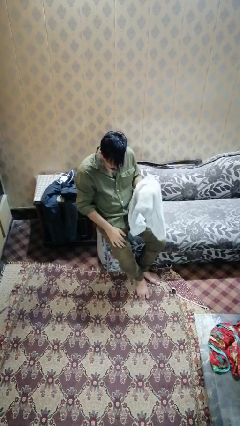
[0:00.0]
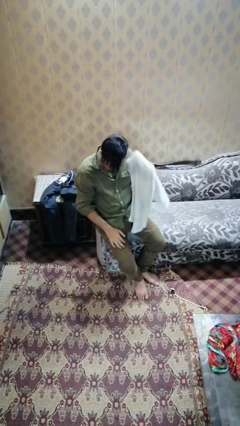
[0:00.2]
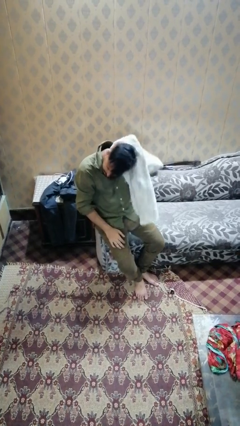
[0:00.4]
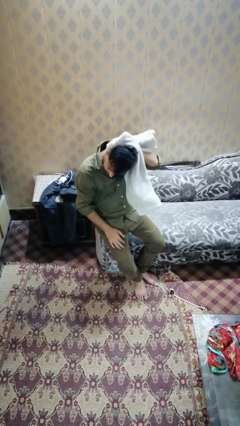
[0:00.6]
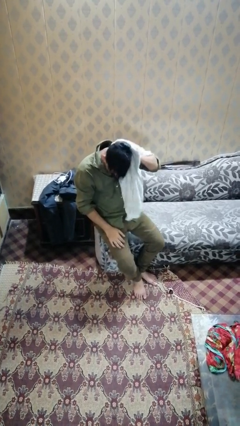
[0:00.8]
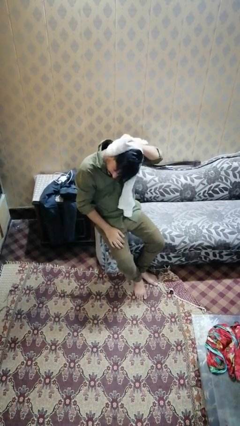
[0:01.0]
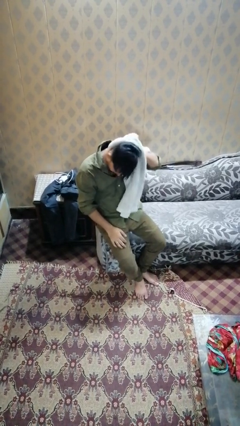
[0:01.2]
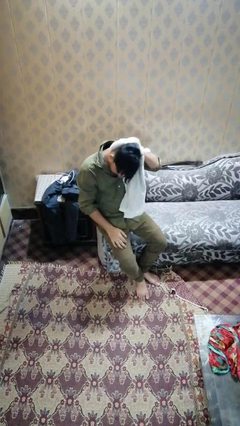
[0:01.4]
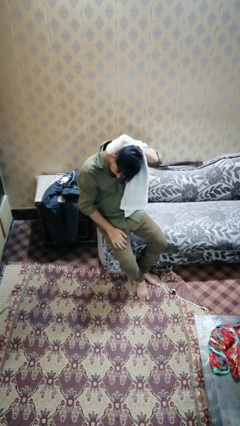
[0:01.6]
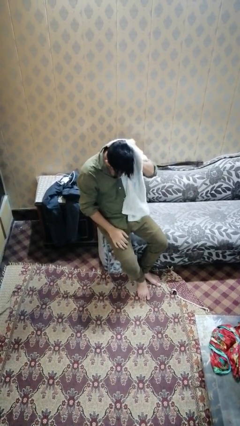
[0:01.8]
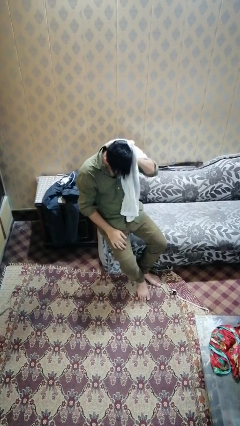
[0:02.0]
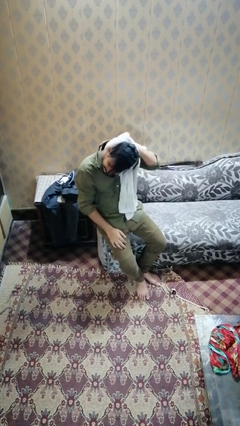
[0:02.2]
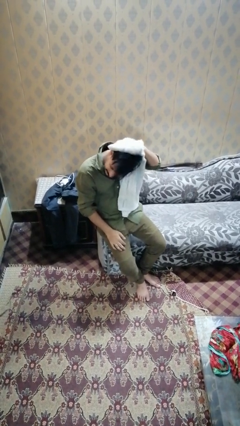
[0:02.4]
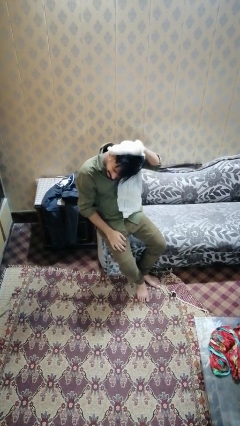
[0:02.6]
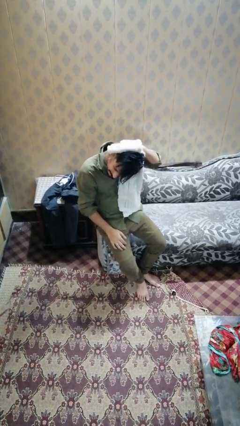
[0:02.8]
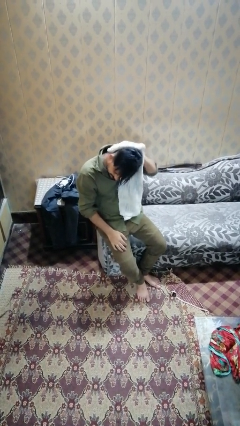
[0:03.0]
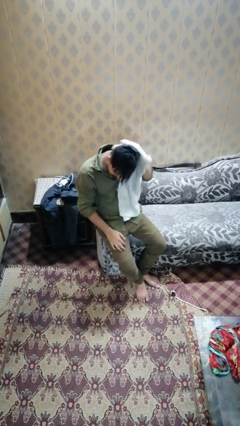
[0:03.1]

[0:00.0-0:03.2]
person dries hair with towel

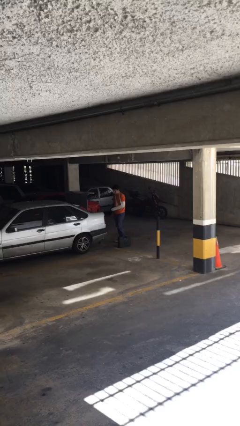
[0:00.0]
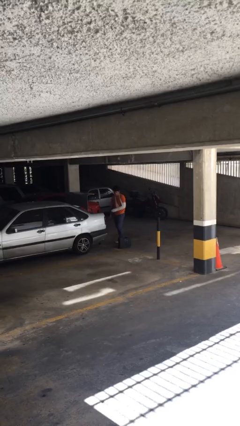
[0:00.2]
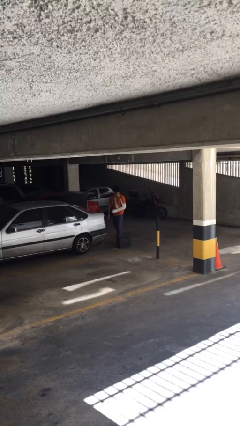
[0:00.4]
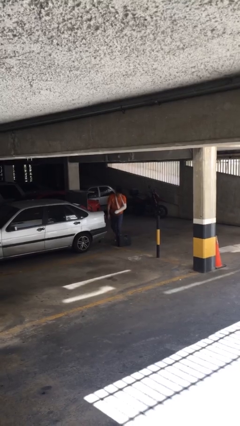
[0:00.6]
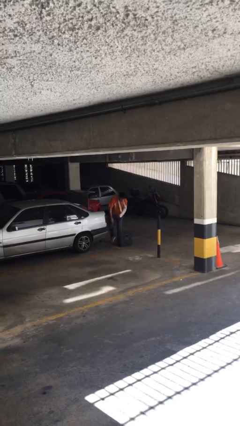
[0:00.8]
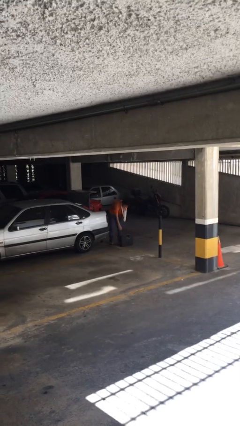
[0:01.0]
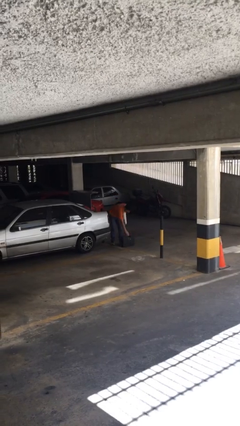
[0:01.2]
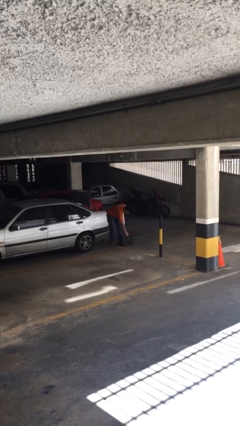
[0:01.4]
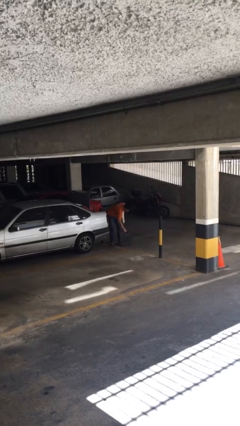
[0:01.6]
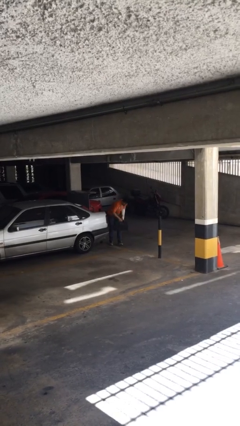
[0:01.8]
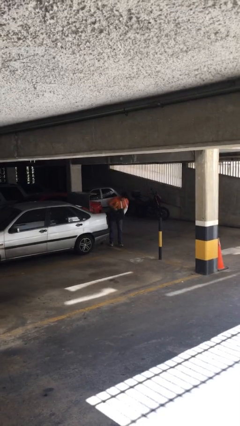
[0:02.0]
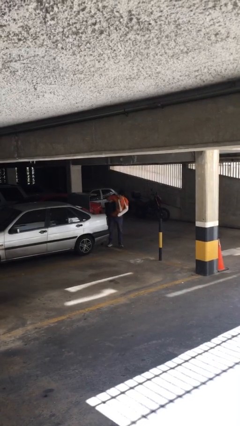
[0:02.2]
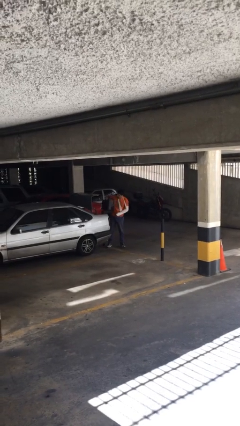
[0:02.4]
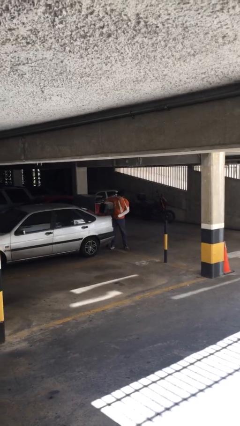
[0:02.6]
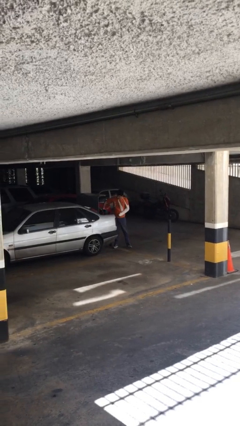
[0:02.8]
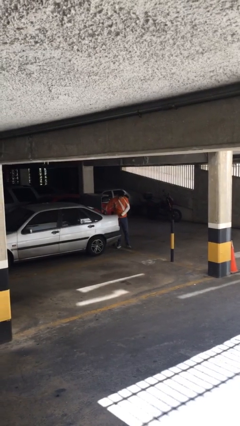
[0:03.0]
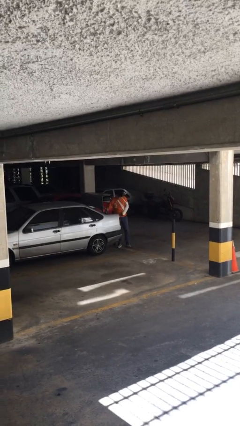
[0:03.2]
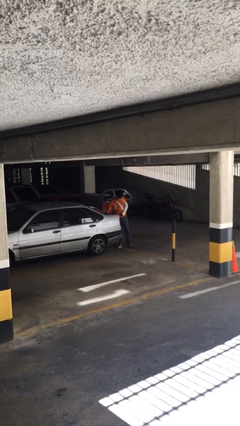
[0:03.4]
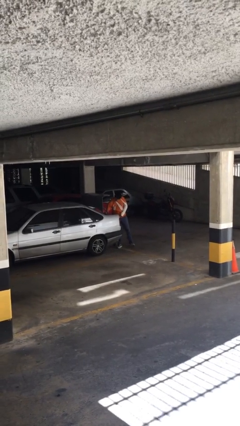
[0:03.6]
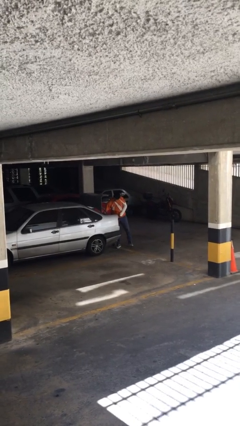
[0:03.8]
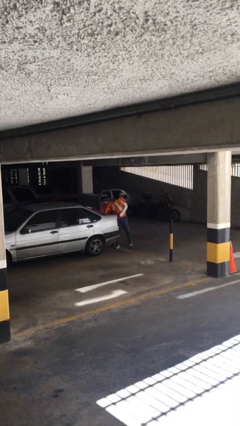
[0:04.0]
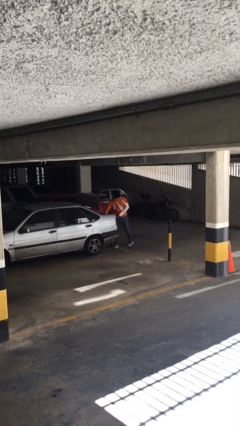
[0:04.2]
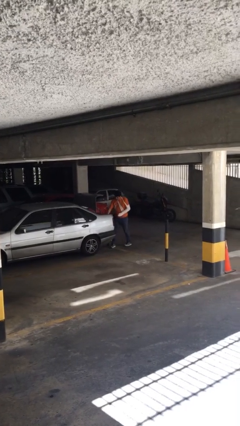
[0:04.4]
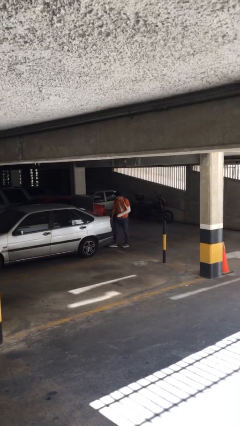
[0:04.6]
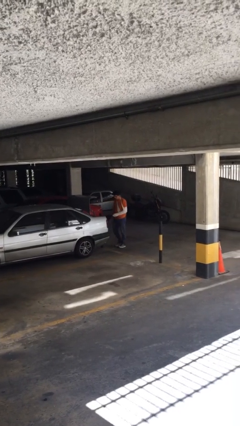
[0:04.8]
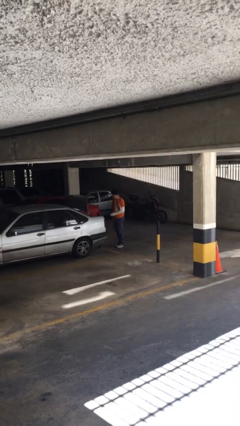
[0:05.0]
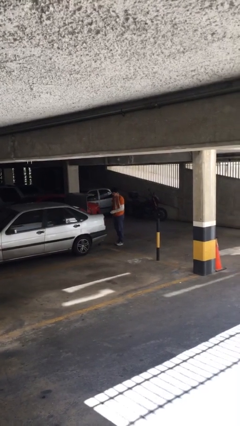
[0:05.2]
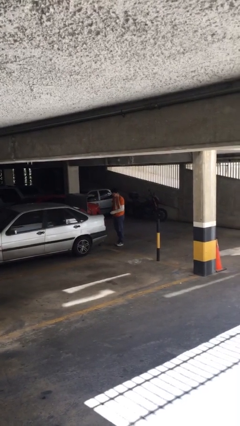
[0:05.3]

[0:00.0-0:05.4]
person loads car

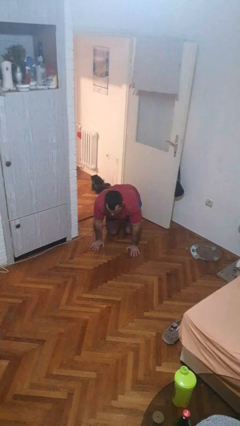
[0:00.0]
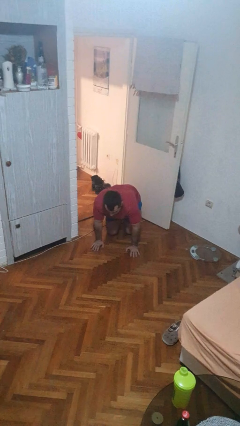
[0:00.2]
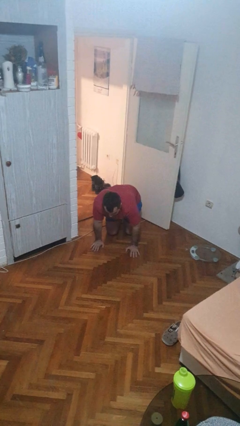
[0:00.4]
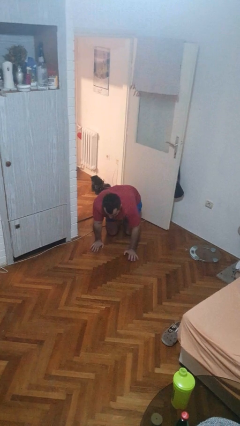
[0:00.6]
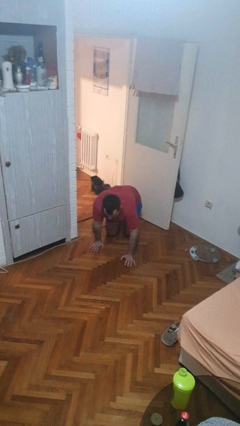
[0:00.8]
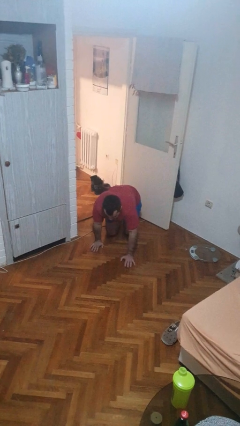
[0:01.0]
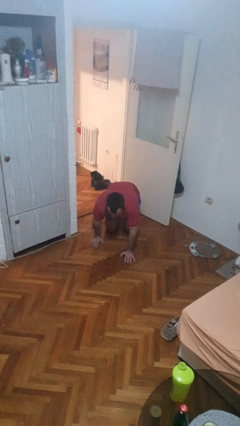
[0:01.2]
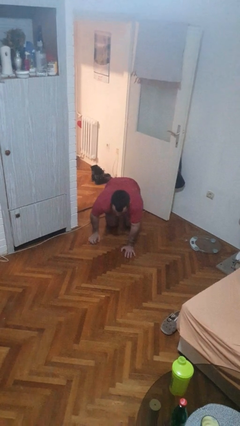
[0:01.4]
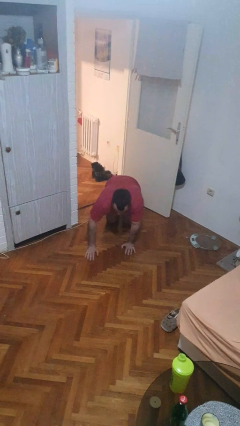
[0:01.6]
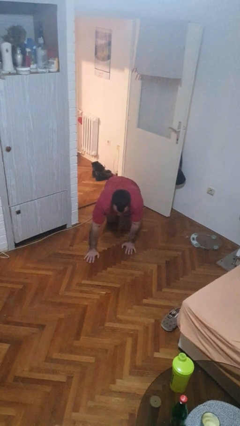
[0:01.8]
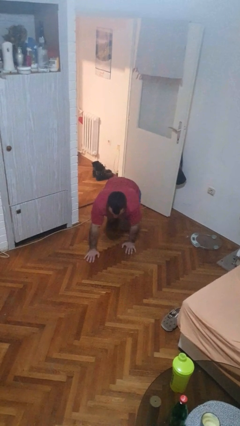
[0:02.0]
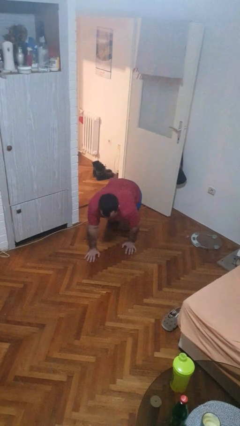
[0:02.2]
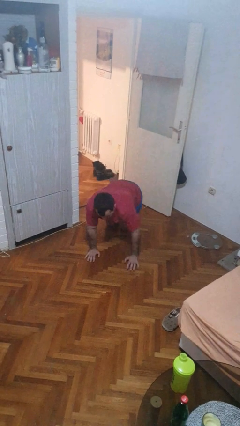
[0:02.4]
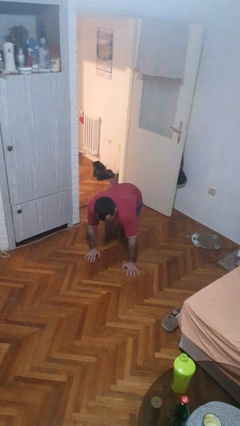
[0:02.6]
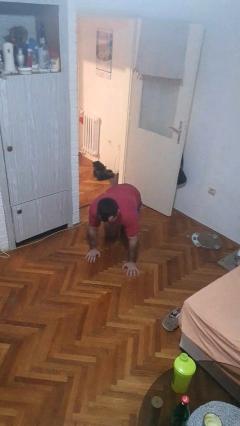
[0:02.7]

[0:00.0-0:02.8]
person crawls

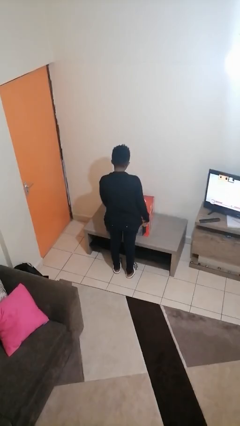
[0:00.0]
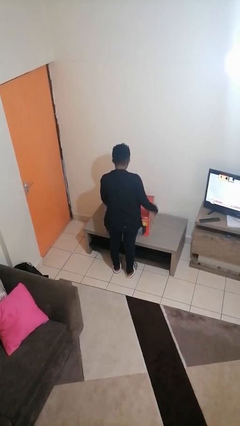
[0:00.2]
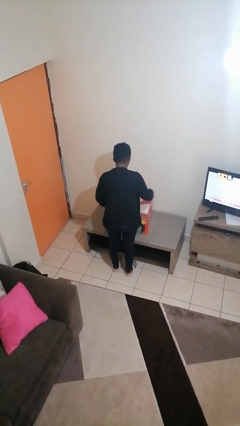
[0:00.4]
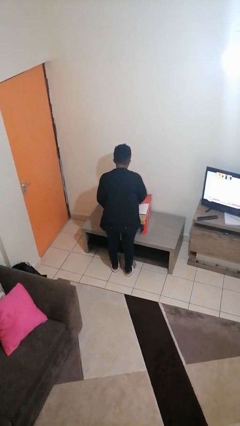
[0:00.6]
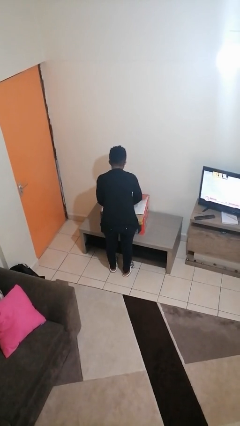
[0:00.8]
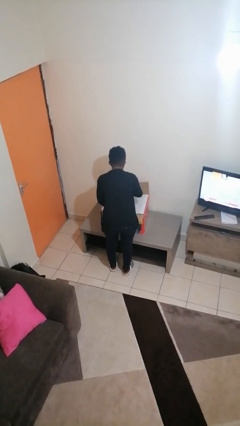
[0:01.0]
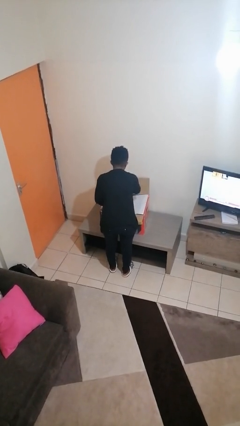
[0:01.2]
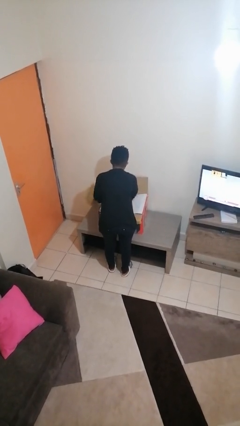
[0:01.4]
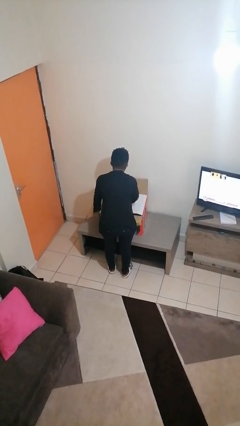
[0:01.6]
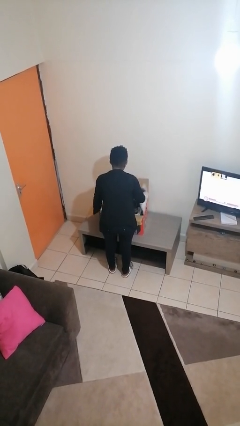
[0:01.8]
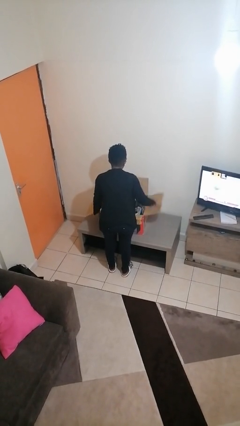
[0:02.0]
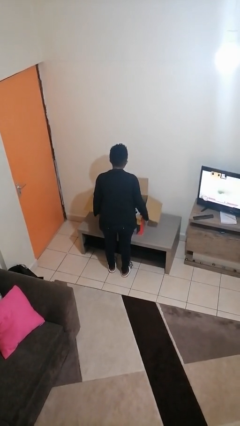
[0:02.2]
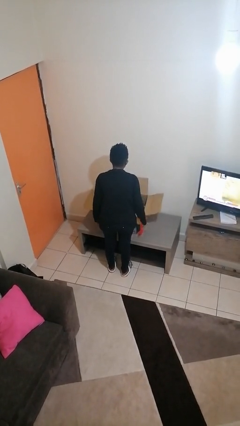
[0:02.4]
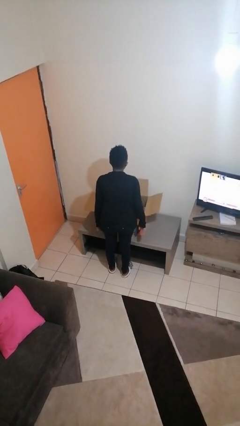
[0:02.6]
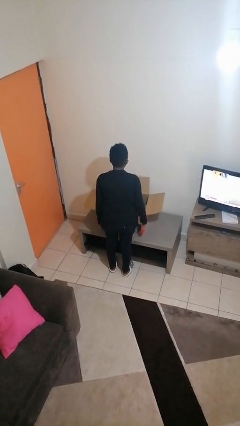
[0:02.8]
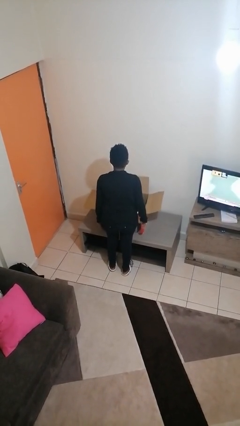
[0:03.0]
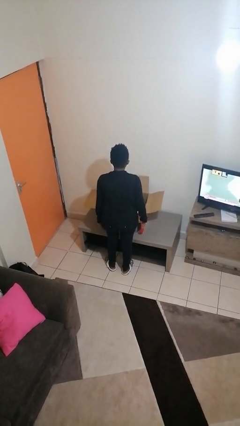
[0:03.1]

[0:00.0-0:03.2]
person opens box

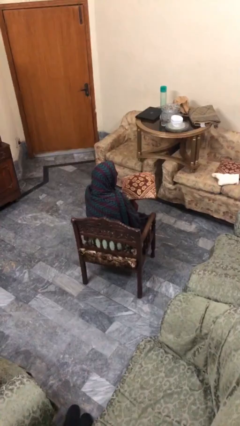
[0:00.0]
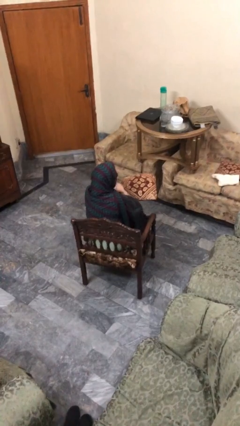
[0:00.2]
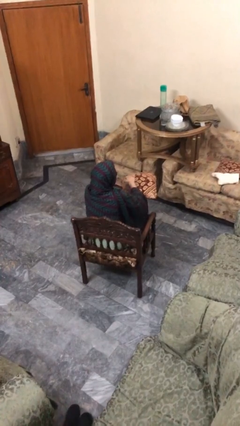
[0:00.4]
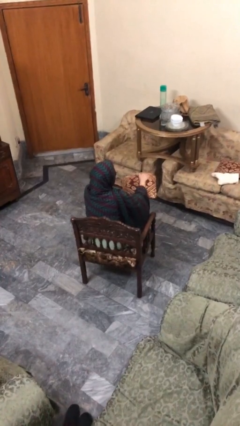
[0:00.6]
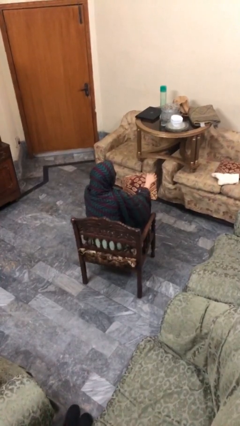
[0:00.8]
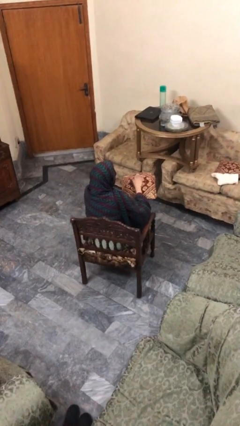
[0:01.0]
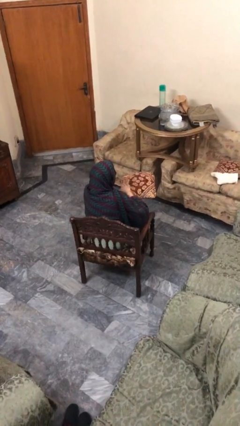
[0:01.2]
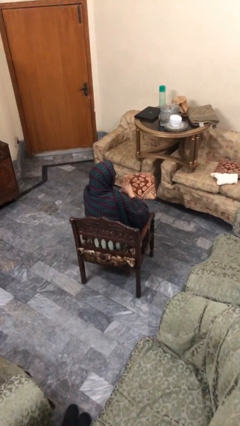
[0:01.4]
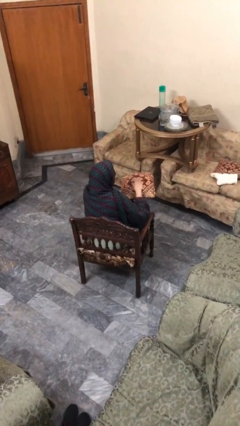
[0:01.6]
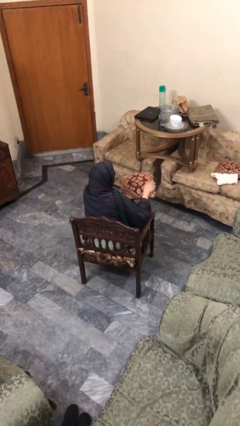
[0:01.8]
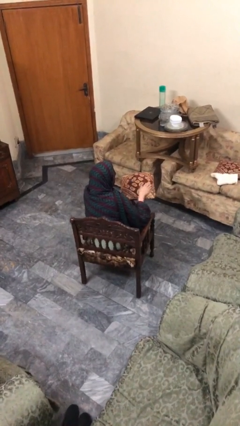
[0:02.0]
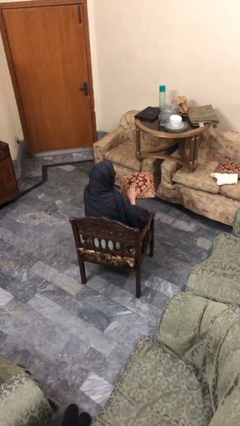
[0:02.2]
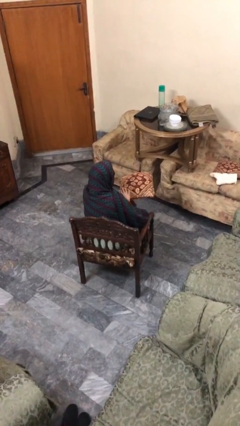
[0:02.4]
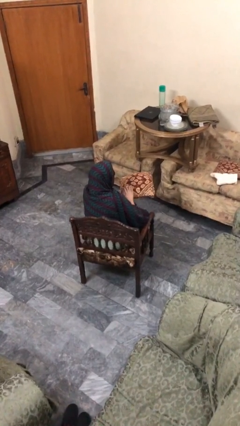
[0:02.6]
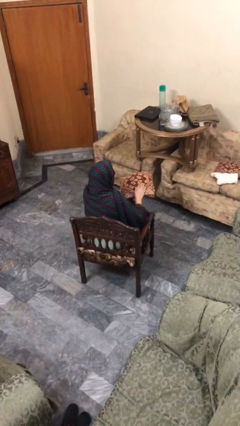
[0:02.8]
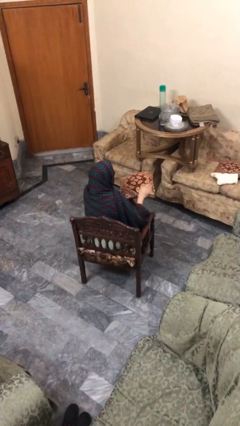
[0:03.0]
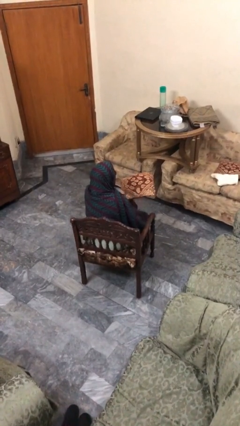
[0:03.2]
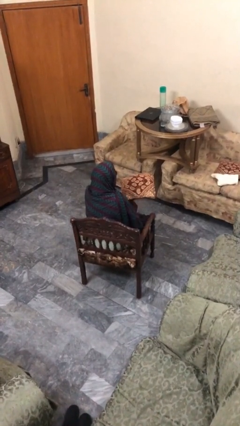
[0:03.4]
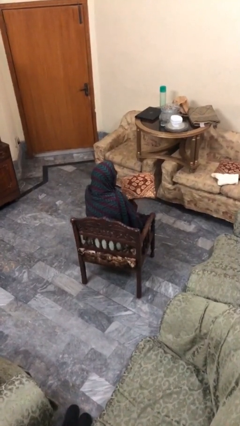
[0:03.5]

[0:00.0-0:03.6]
person waves hand over object
